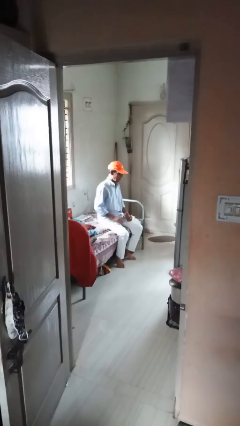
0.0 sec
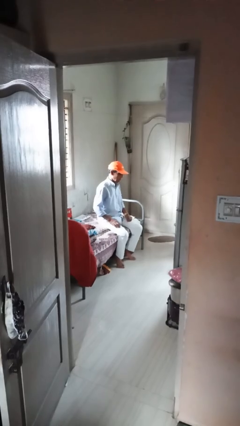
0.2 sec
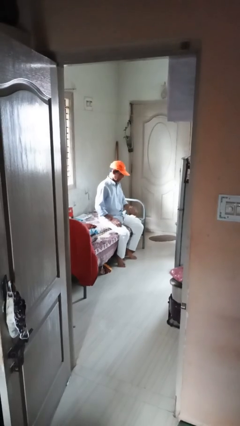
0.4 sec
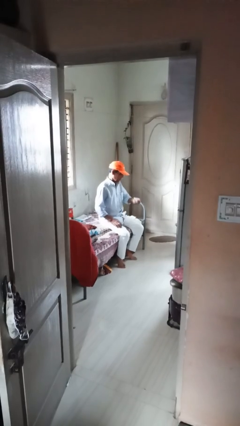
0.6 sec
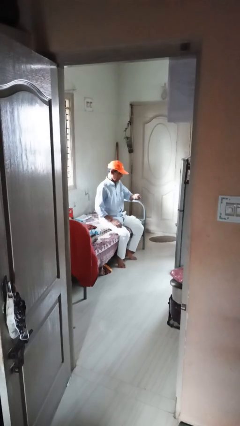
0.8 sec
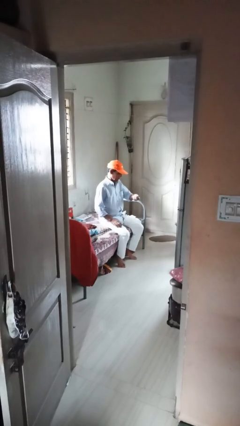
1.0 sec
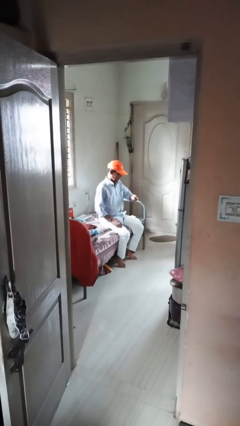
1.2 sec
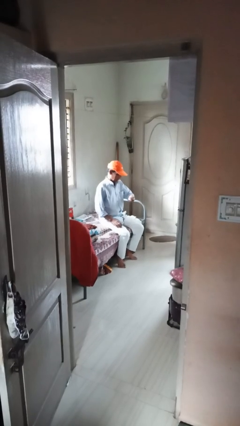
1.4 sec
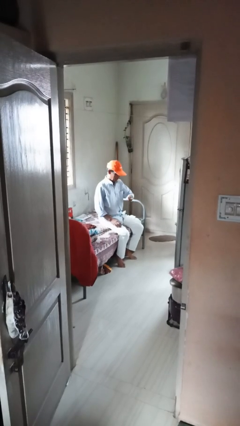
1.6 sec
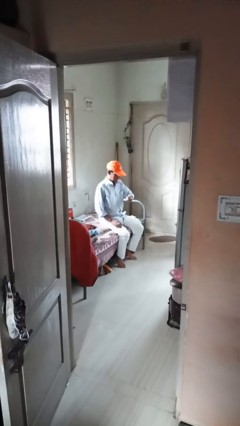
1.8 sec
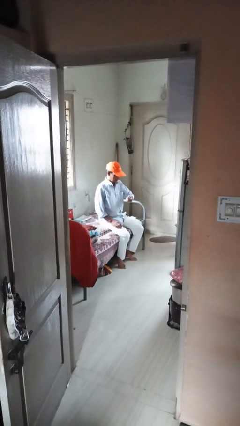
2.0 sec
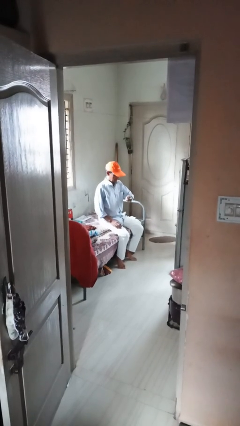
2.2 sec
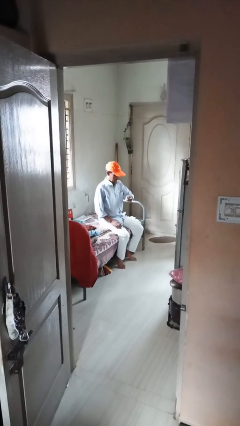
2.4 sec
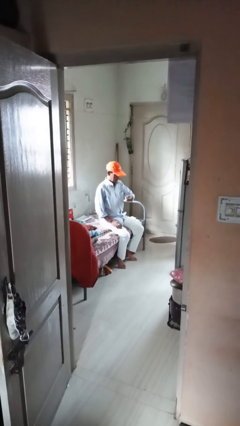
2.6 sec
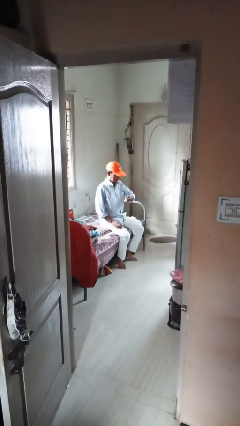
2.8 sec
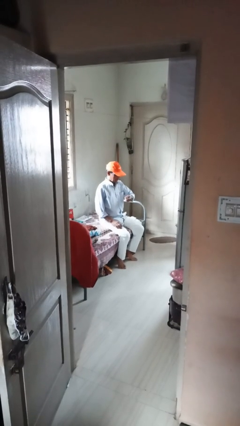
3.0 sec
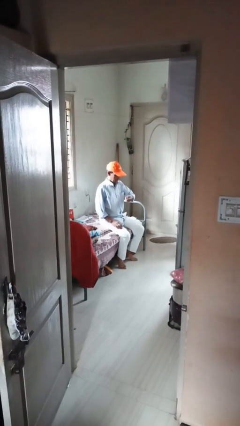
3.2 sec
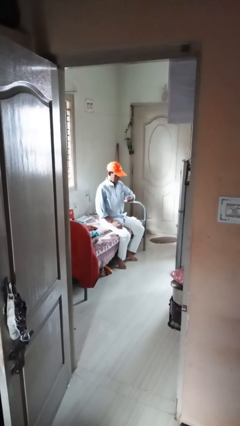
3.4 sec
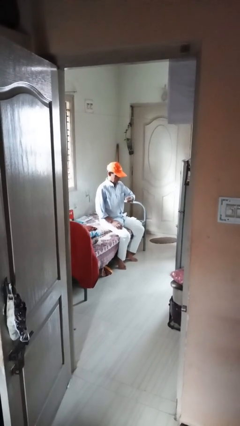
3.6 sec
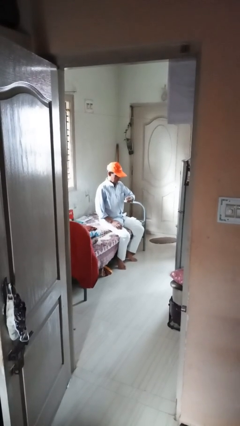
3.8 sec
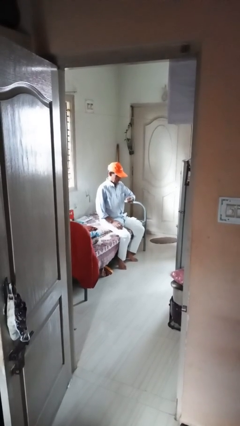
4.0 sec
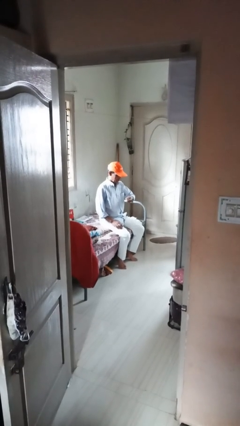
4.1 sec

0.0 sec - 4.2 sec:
person looks at wristwatch

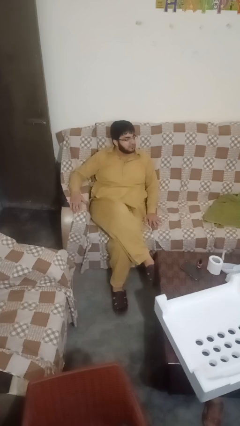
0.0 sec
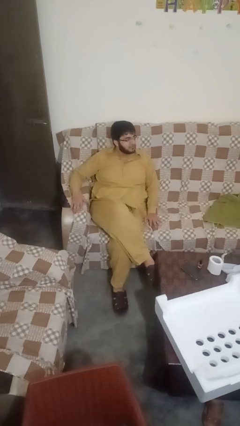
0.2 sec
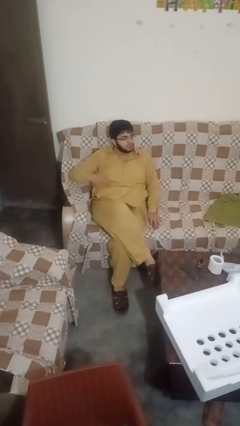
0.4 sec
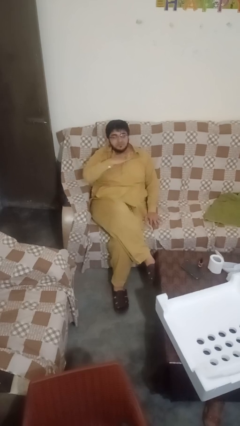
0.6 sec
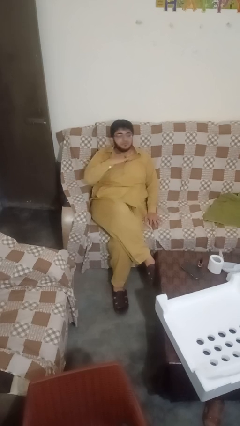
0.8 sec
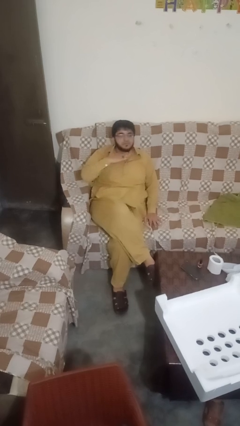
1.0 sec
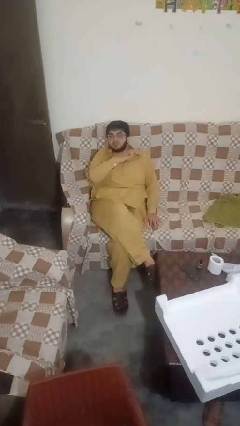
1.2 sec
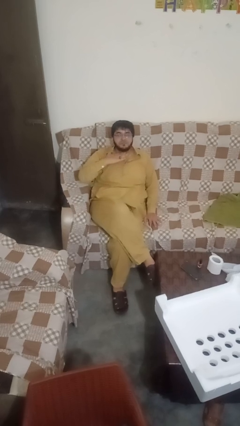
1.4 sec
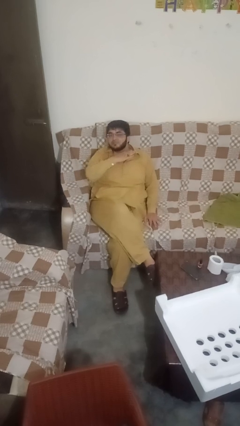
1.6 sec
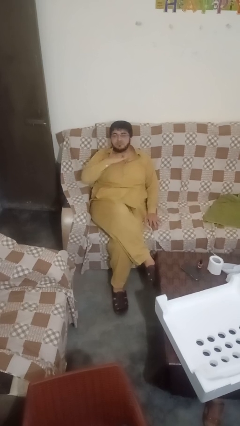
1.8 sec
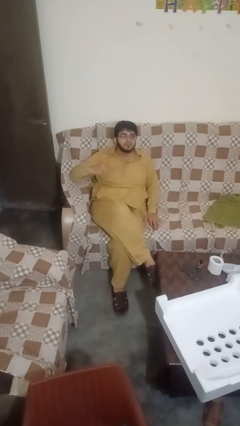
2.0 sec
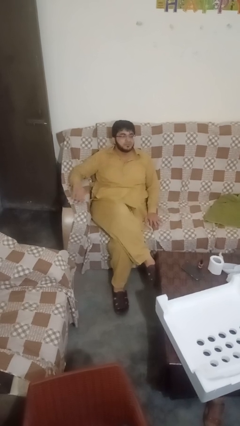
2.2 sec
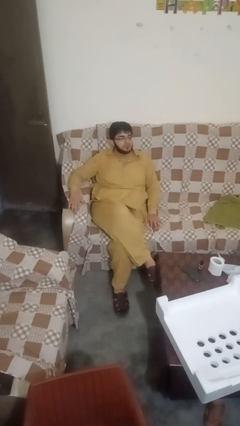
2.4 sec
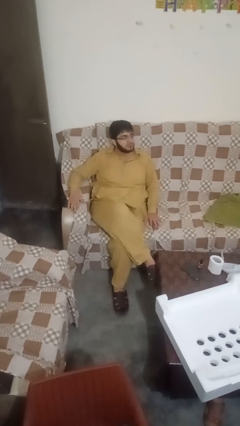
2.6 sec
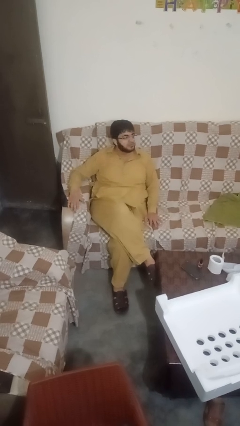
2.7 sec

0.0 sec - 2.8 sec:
person gestures cut
